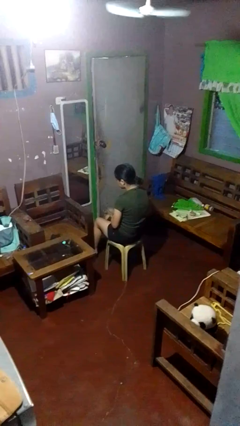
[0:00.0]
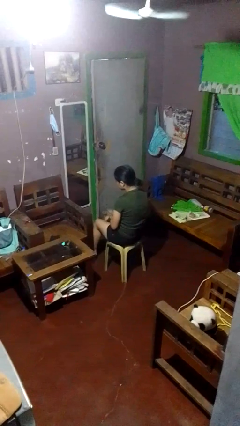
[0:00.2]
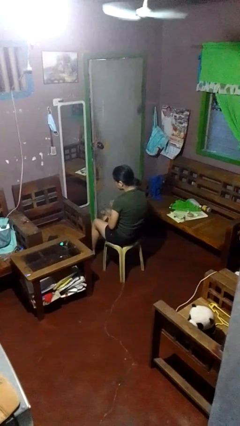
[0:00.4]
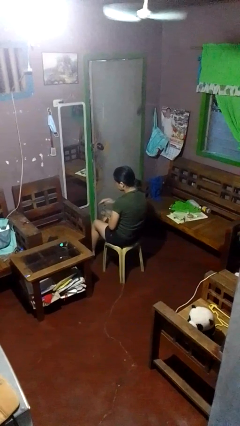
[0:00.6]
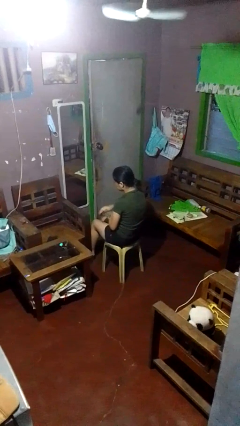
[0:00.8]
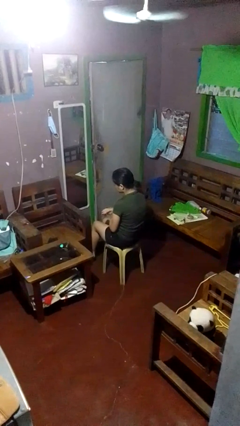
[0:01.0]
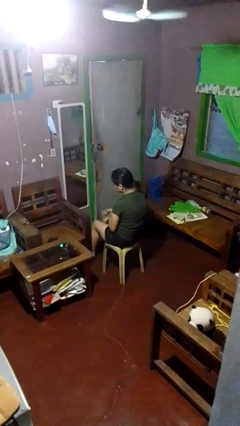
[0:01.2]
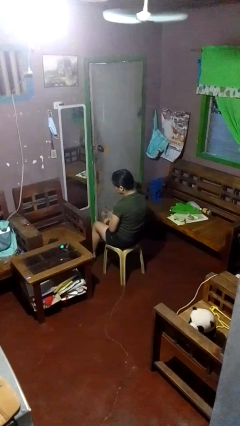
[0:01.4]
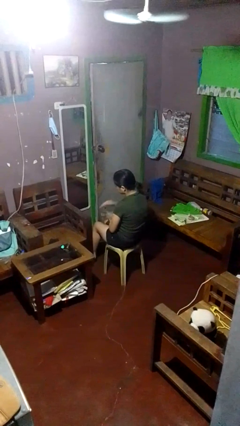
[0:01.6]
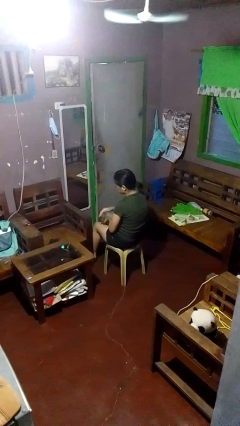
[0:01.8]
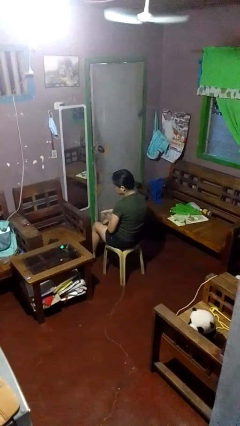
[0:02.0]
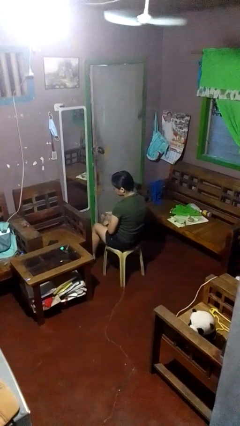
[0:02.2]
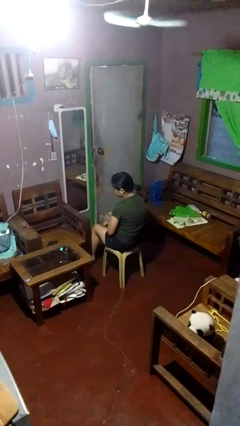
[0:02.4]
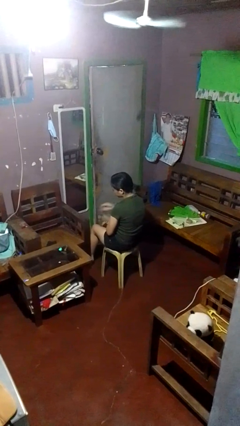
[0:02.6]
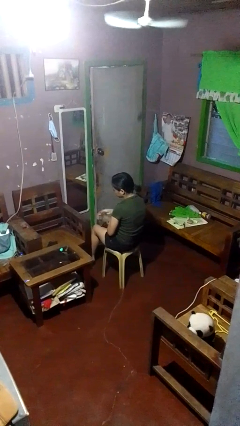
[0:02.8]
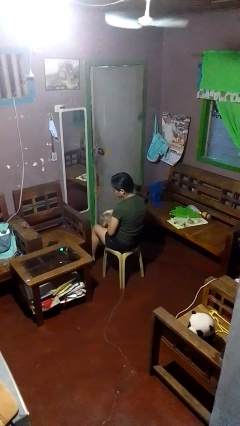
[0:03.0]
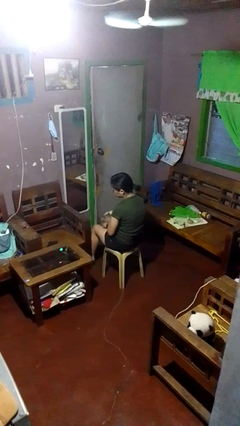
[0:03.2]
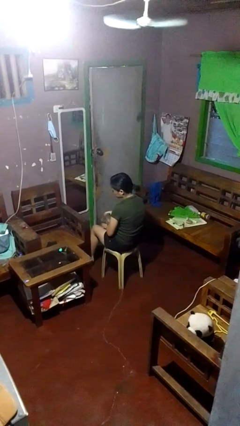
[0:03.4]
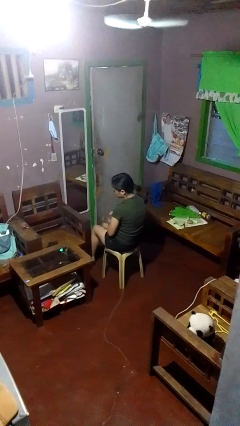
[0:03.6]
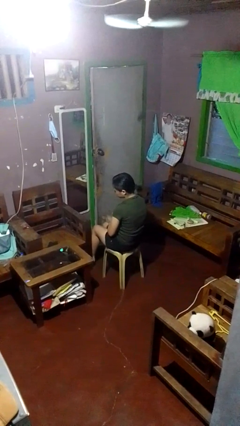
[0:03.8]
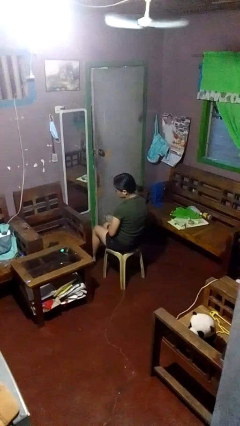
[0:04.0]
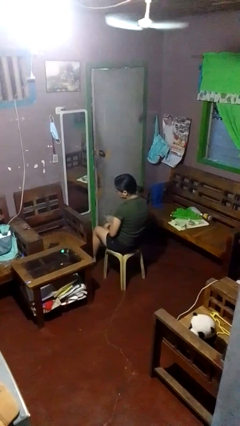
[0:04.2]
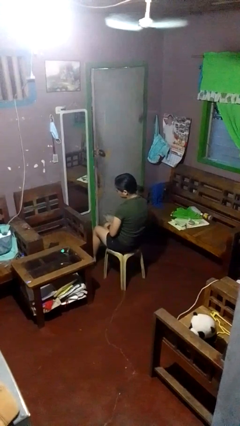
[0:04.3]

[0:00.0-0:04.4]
person pets cat

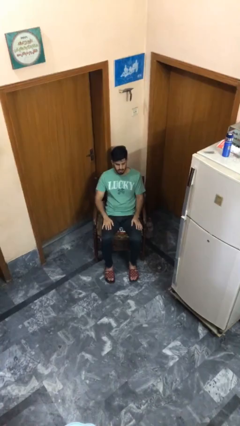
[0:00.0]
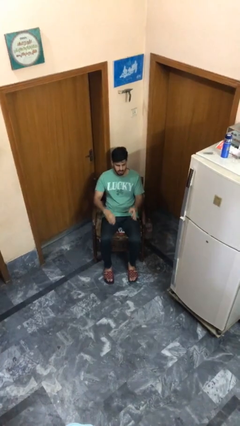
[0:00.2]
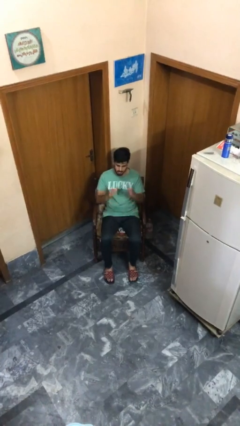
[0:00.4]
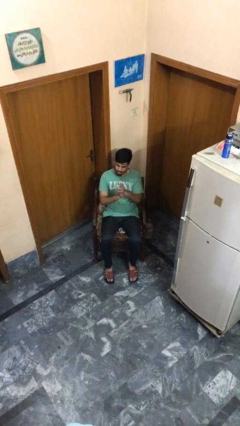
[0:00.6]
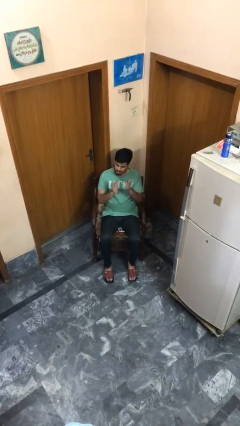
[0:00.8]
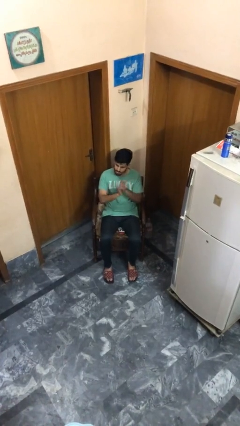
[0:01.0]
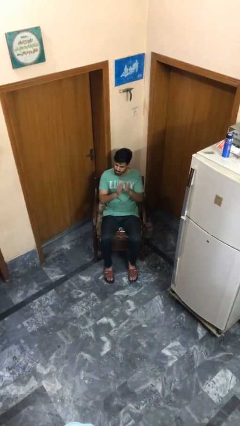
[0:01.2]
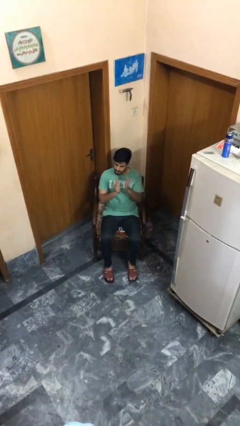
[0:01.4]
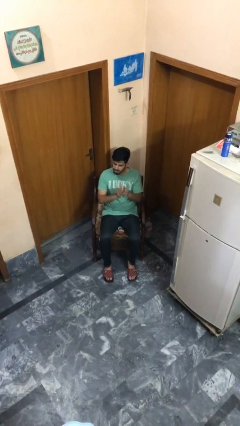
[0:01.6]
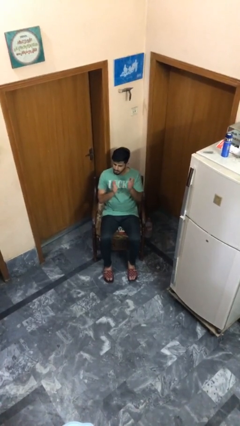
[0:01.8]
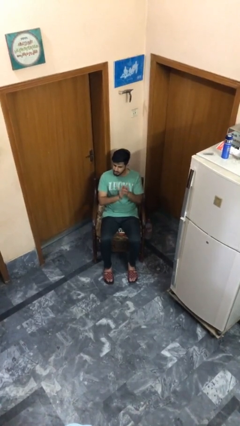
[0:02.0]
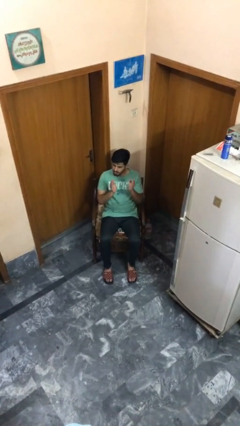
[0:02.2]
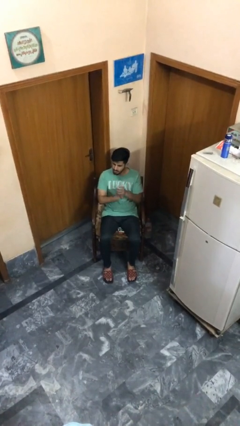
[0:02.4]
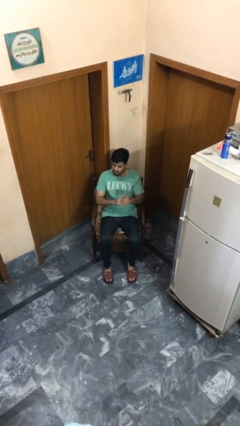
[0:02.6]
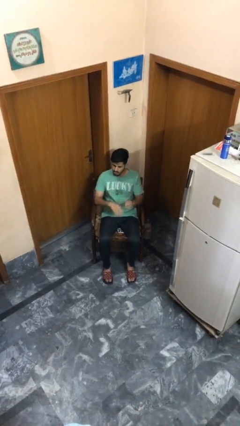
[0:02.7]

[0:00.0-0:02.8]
person claps hands

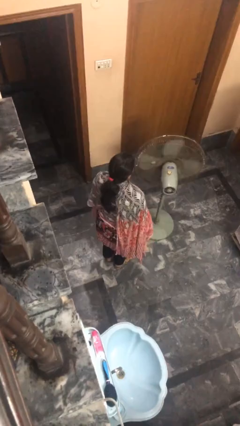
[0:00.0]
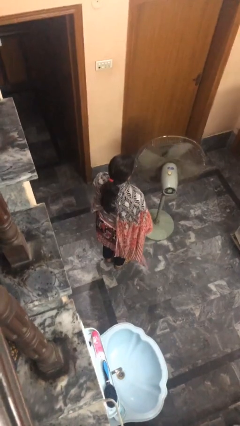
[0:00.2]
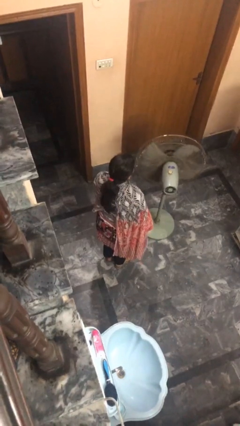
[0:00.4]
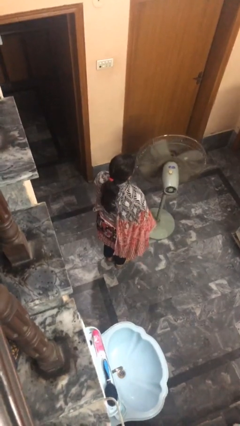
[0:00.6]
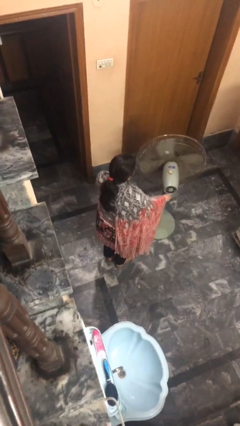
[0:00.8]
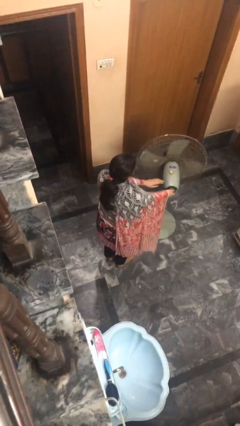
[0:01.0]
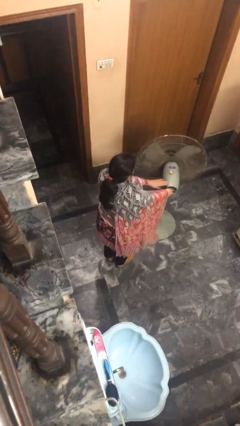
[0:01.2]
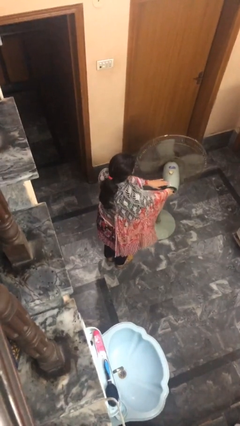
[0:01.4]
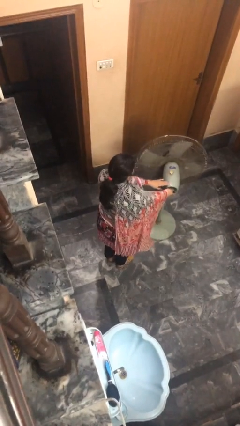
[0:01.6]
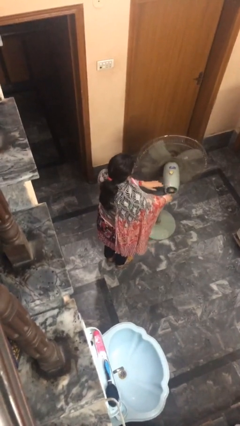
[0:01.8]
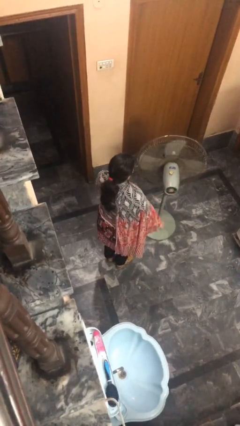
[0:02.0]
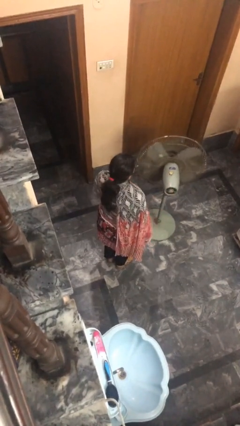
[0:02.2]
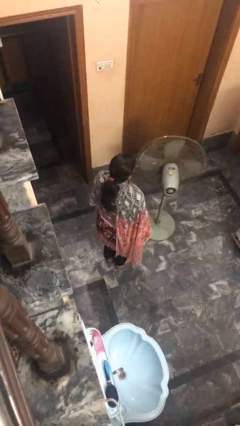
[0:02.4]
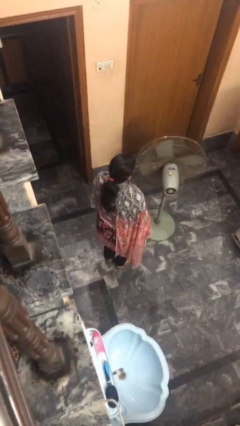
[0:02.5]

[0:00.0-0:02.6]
person turns off fan

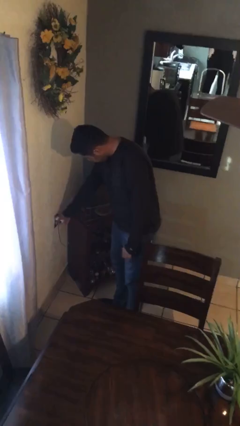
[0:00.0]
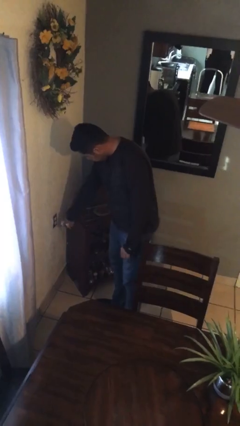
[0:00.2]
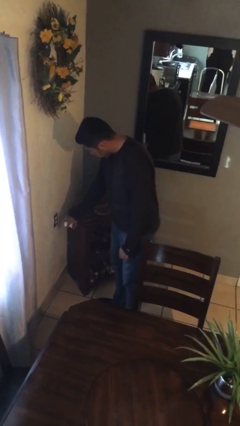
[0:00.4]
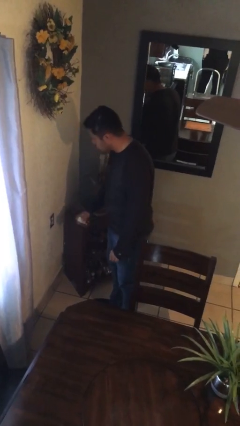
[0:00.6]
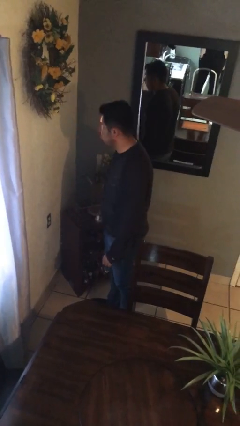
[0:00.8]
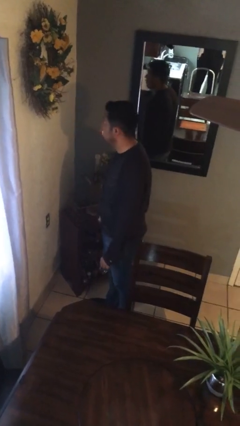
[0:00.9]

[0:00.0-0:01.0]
person pulls wheeled trashcan

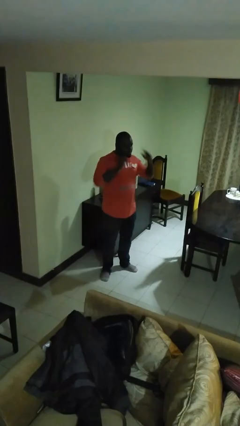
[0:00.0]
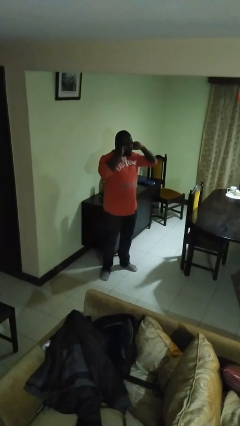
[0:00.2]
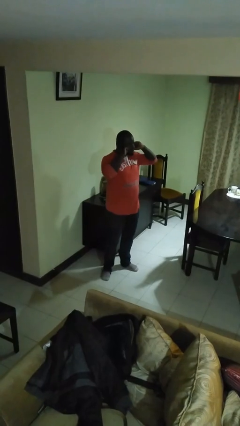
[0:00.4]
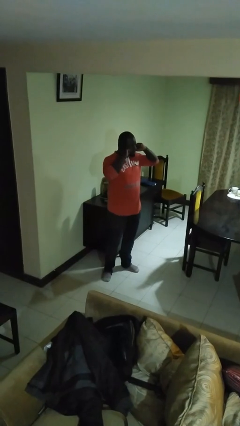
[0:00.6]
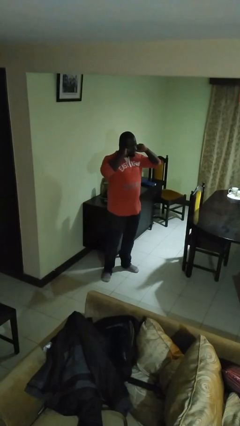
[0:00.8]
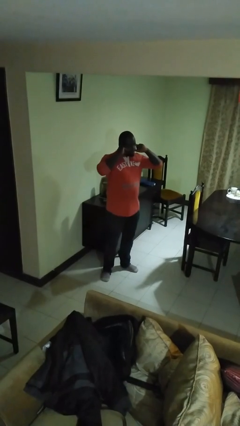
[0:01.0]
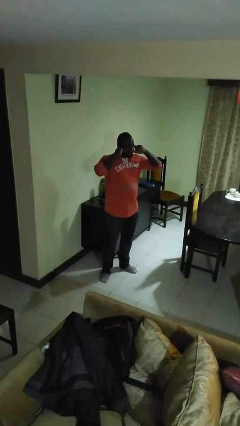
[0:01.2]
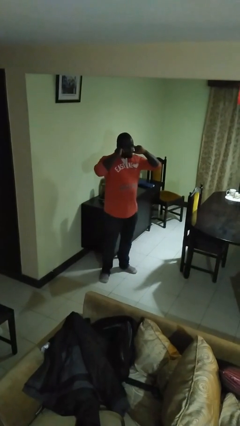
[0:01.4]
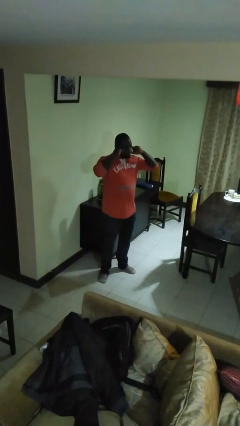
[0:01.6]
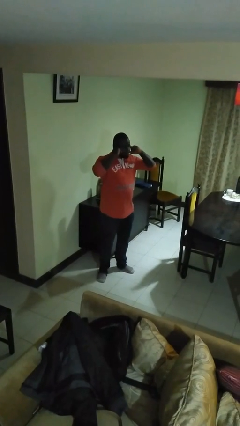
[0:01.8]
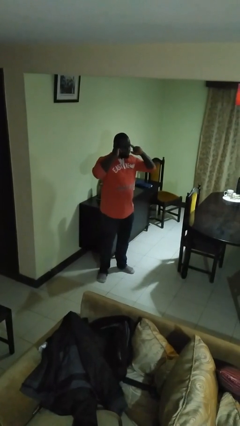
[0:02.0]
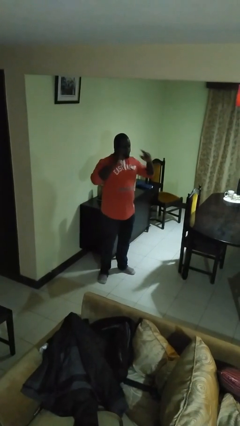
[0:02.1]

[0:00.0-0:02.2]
person puts fingers in ear

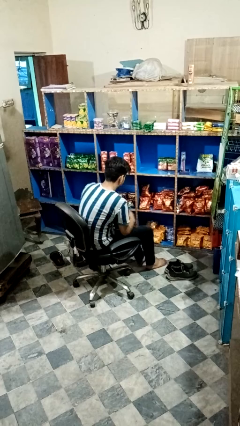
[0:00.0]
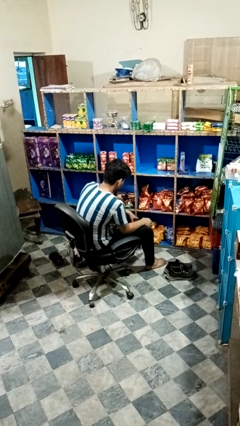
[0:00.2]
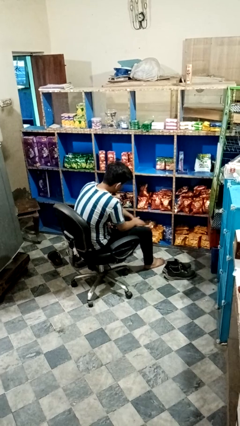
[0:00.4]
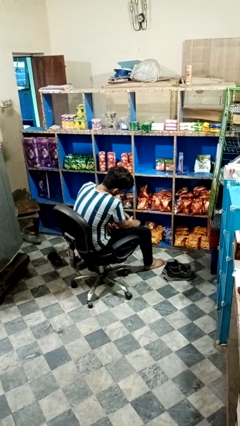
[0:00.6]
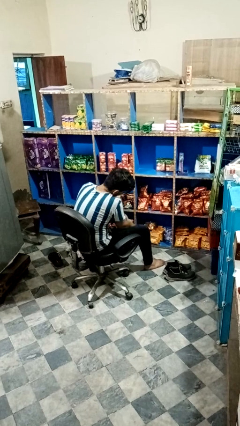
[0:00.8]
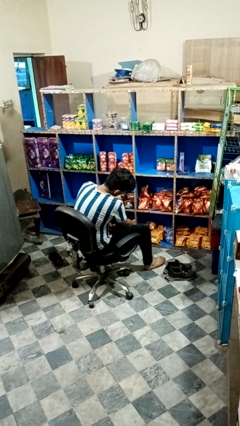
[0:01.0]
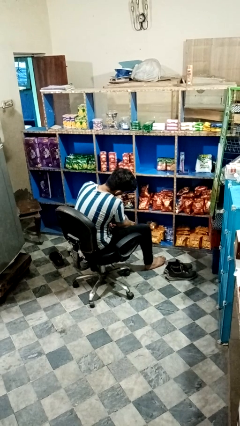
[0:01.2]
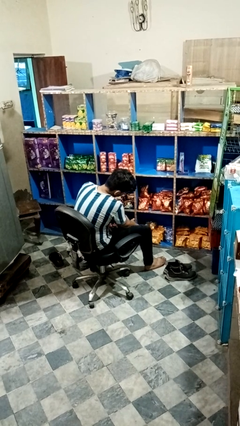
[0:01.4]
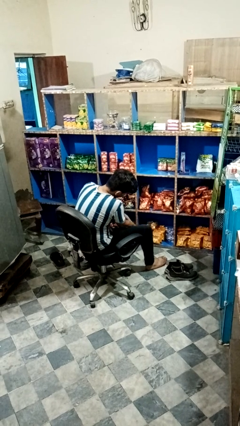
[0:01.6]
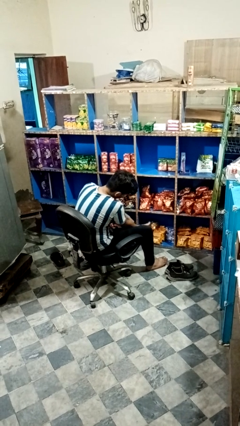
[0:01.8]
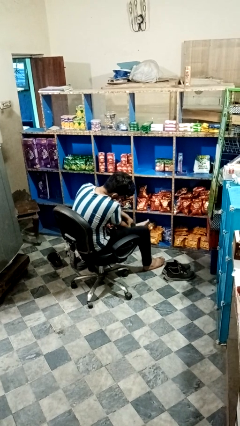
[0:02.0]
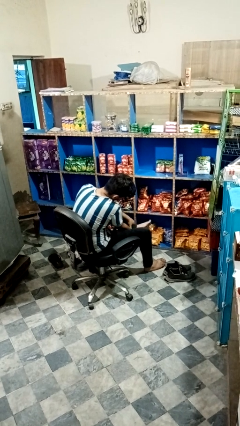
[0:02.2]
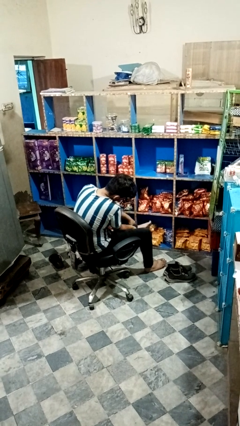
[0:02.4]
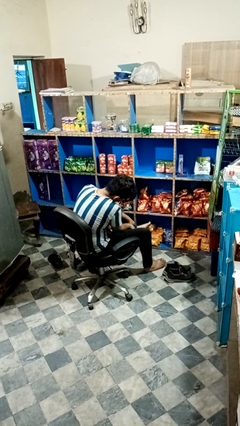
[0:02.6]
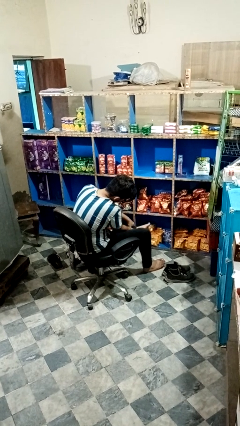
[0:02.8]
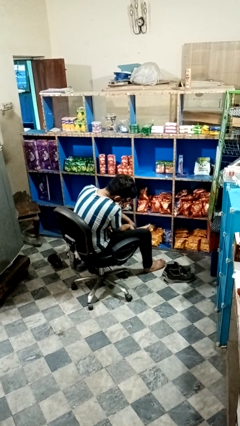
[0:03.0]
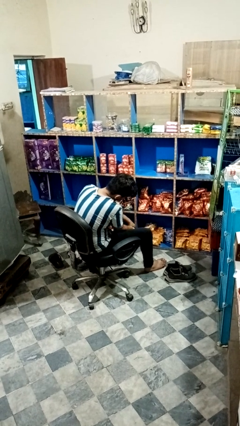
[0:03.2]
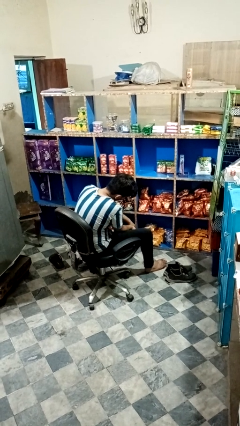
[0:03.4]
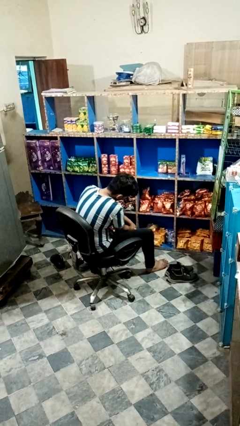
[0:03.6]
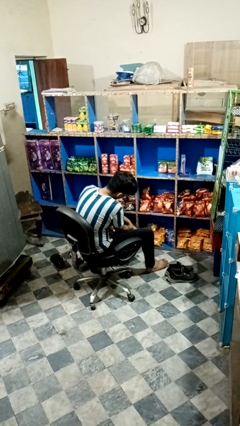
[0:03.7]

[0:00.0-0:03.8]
person rubs foot

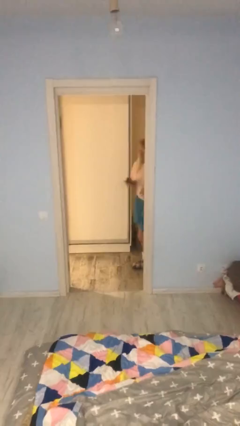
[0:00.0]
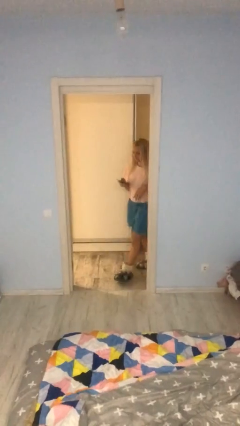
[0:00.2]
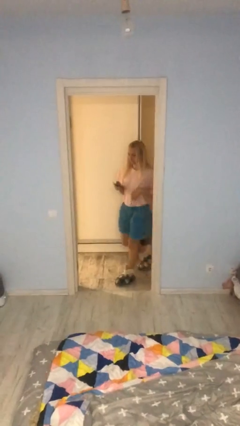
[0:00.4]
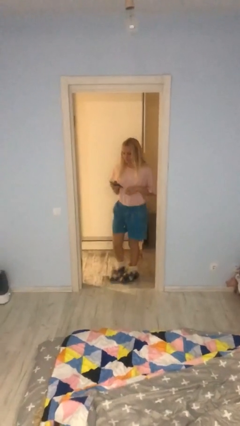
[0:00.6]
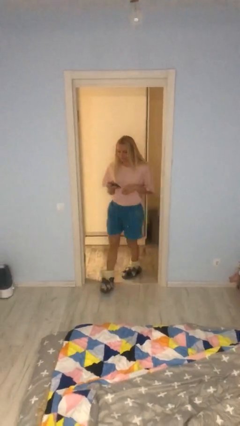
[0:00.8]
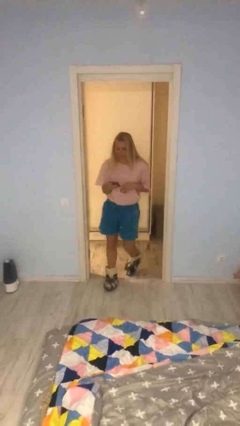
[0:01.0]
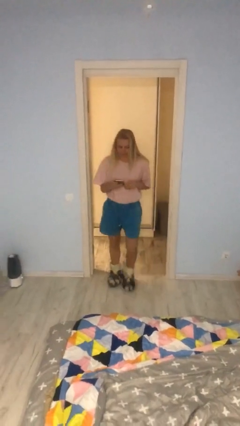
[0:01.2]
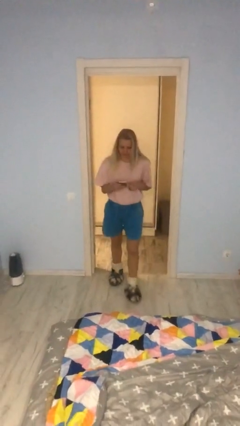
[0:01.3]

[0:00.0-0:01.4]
person enters scene through structure
